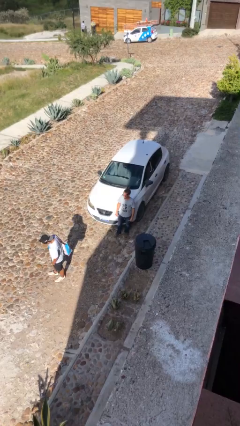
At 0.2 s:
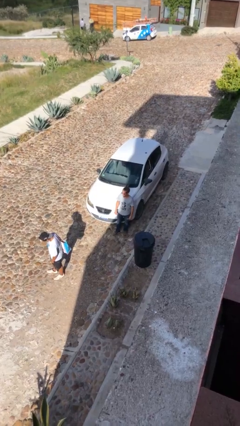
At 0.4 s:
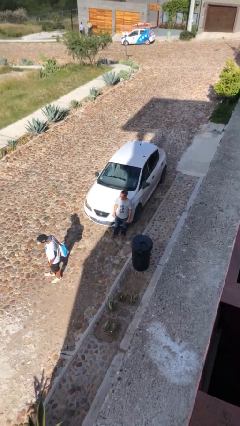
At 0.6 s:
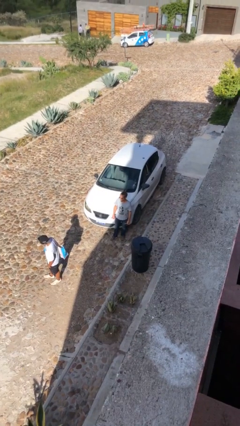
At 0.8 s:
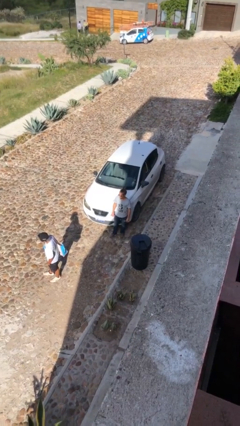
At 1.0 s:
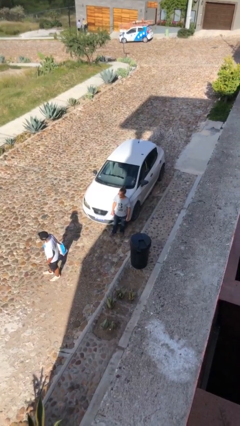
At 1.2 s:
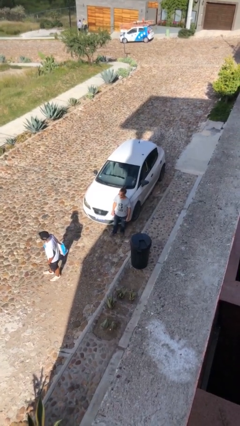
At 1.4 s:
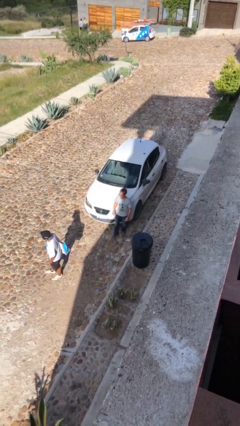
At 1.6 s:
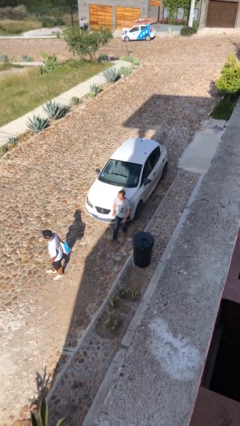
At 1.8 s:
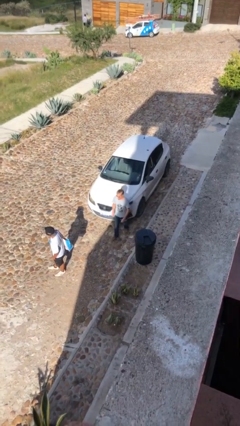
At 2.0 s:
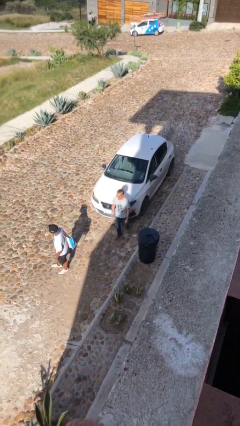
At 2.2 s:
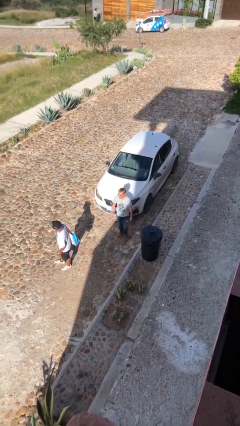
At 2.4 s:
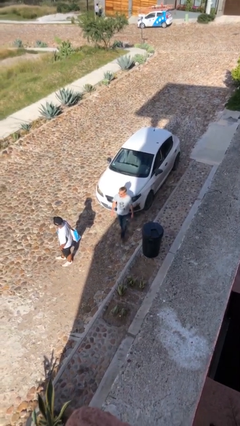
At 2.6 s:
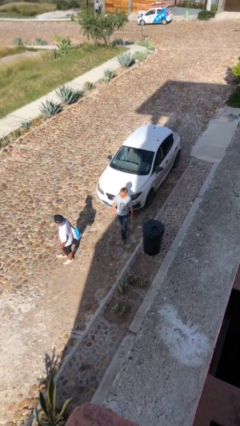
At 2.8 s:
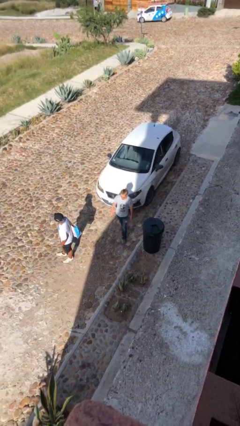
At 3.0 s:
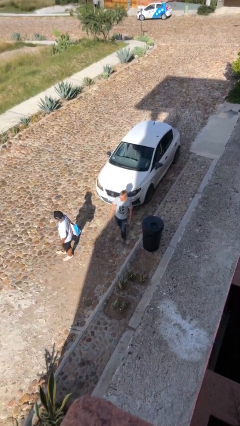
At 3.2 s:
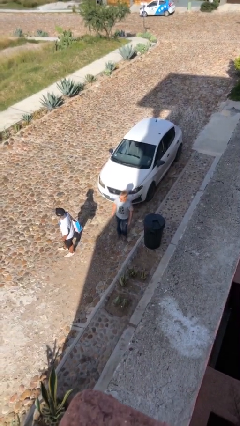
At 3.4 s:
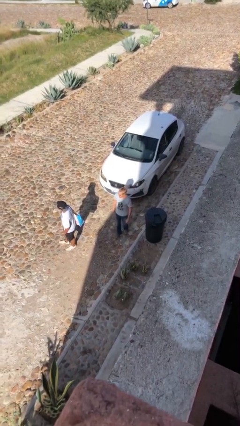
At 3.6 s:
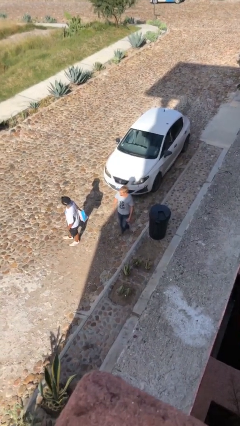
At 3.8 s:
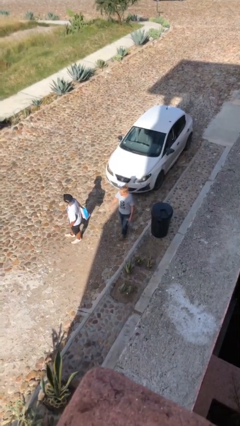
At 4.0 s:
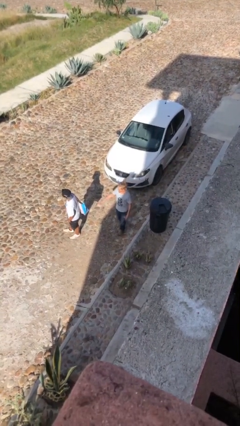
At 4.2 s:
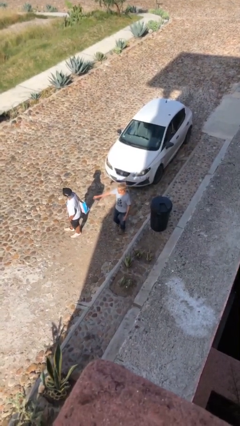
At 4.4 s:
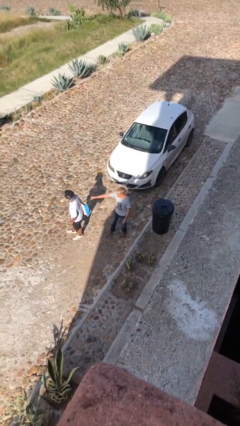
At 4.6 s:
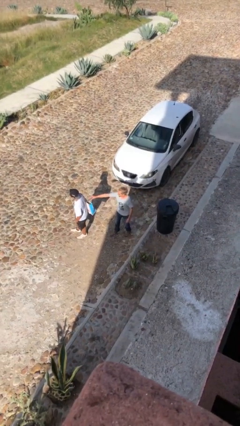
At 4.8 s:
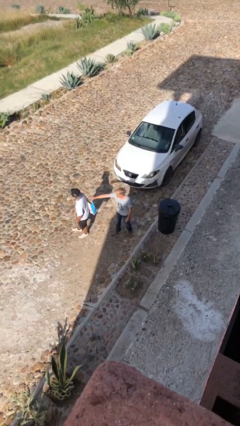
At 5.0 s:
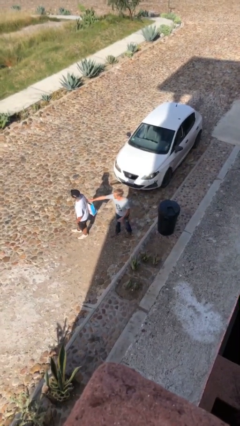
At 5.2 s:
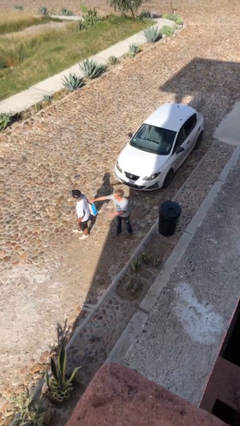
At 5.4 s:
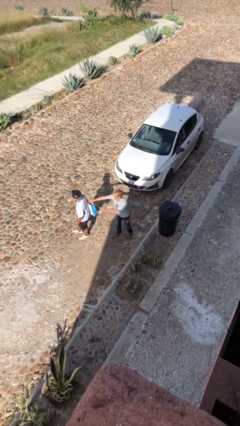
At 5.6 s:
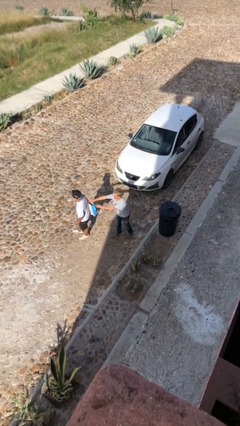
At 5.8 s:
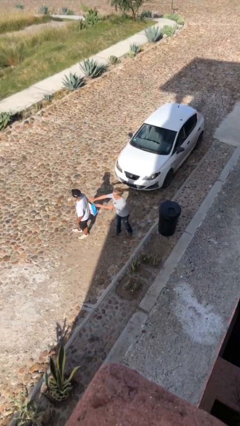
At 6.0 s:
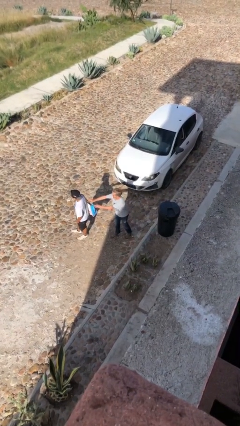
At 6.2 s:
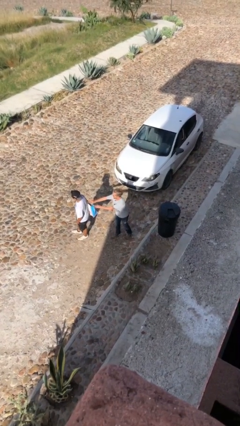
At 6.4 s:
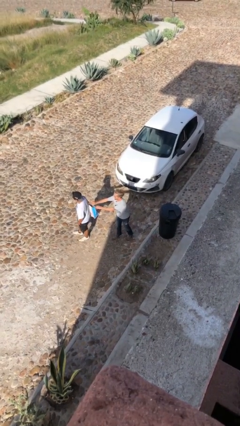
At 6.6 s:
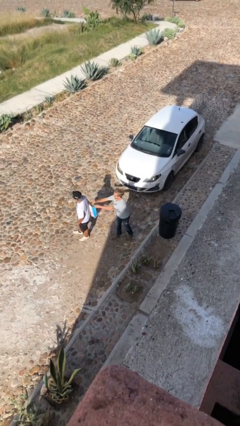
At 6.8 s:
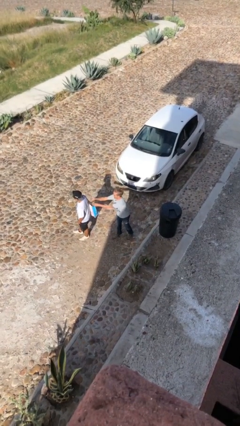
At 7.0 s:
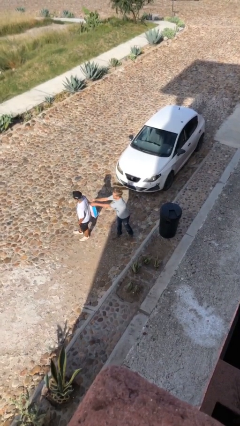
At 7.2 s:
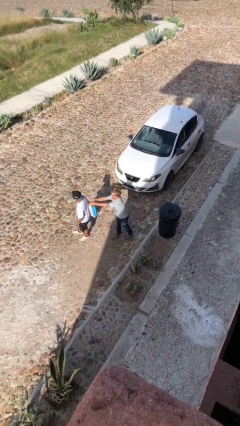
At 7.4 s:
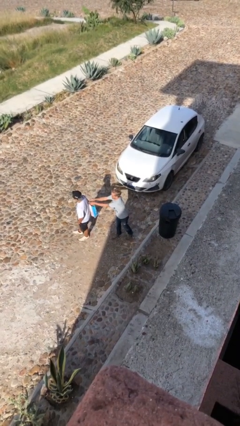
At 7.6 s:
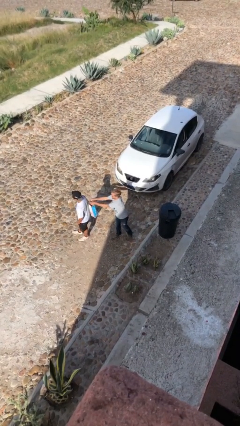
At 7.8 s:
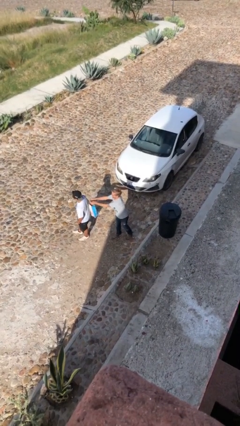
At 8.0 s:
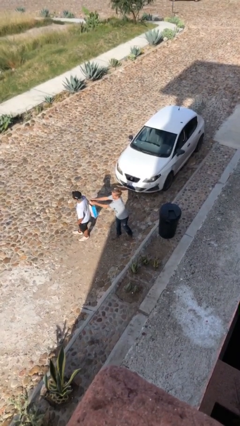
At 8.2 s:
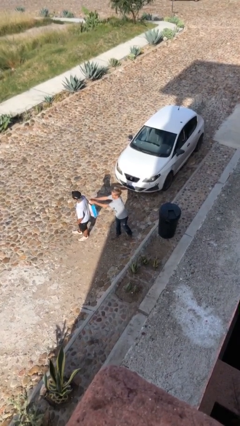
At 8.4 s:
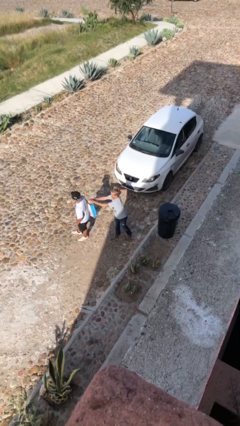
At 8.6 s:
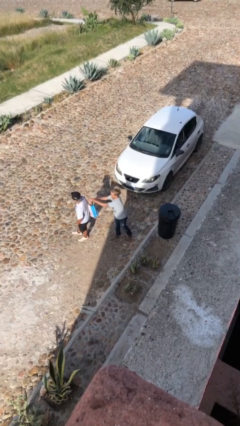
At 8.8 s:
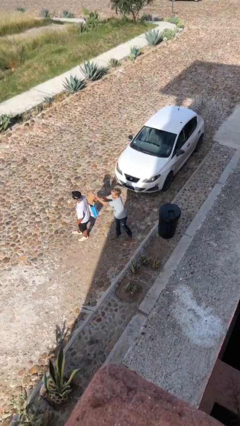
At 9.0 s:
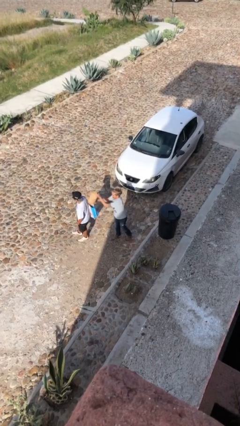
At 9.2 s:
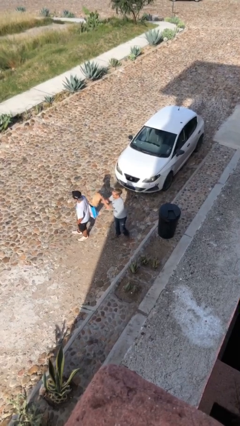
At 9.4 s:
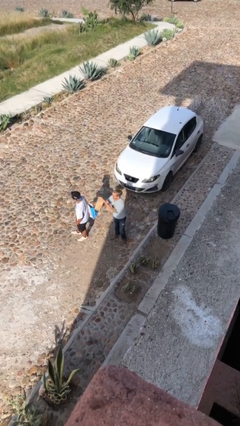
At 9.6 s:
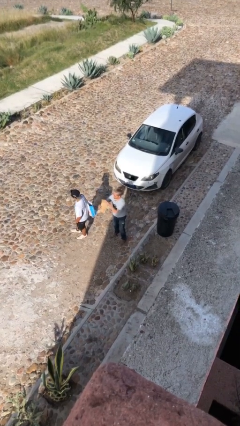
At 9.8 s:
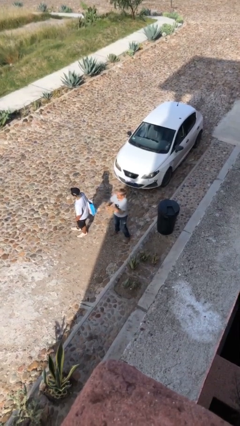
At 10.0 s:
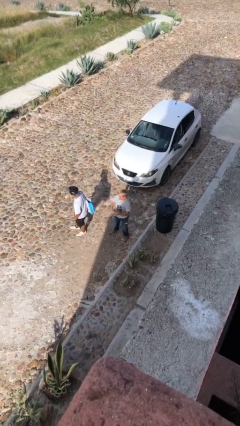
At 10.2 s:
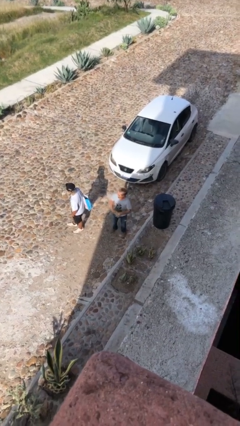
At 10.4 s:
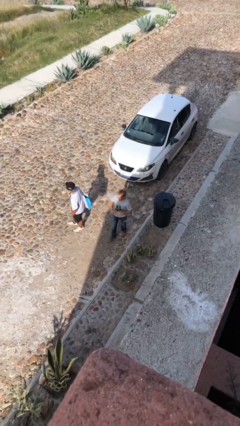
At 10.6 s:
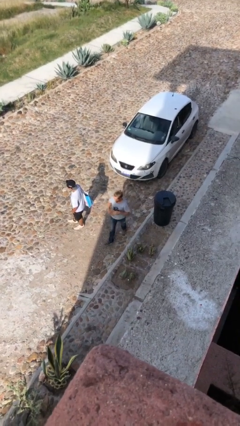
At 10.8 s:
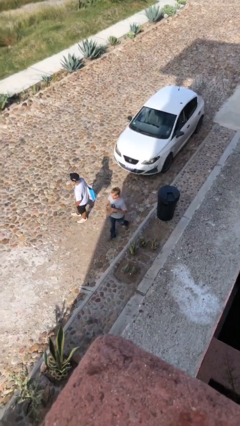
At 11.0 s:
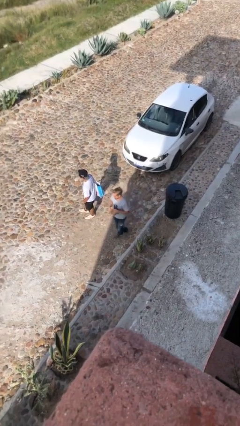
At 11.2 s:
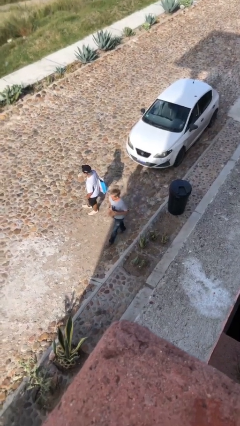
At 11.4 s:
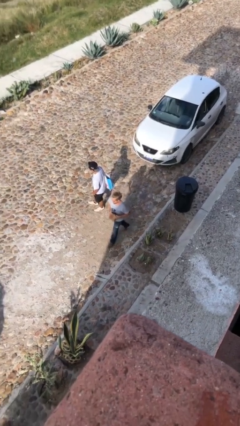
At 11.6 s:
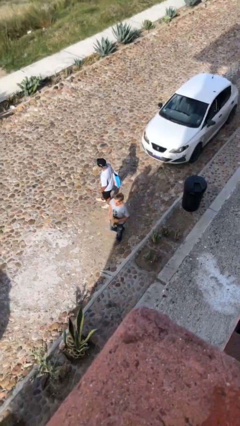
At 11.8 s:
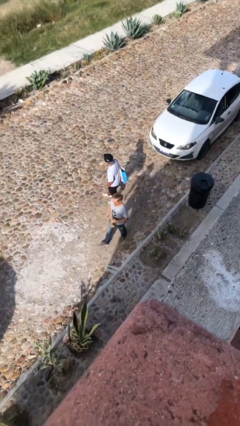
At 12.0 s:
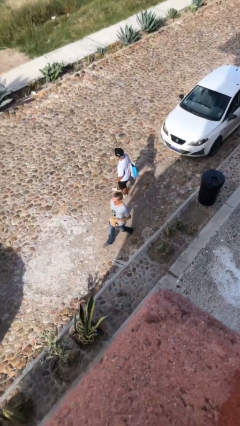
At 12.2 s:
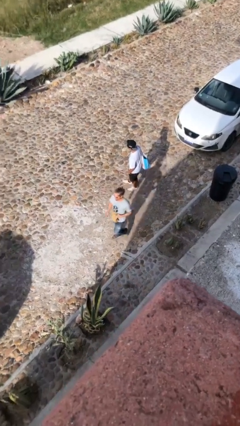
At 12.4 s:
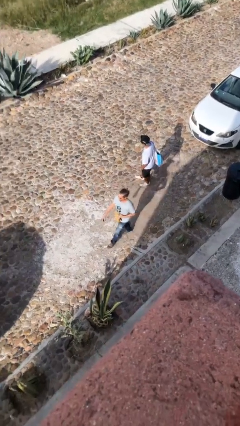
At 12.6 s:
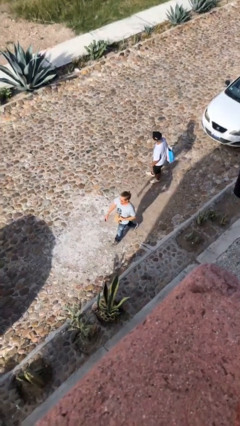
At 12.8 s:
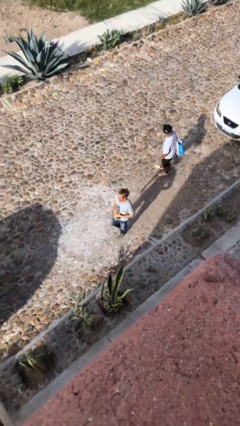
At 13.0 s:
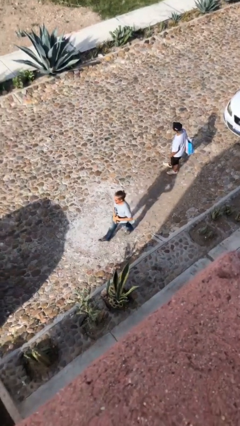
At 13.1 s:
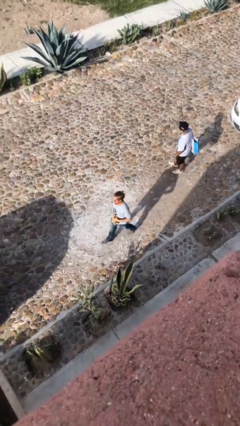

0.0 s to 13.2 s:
person steals object from person

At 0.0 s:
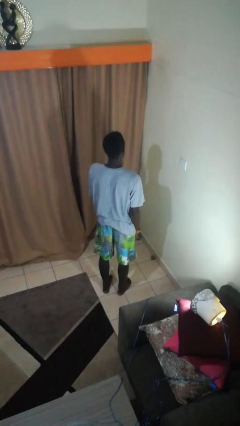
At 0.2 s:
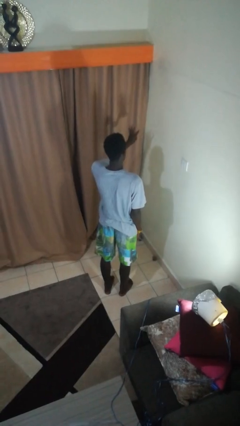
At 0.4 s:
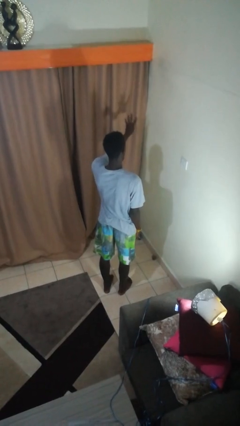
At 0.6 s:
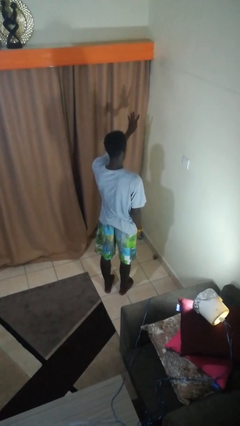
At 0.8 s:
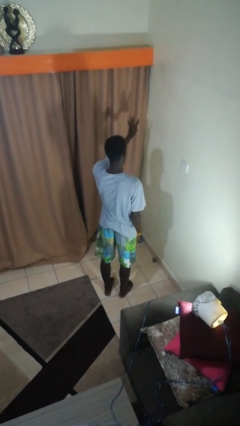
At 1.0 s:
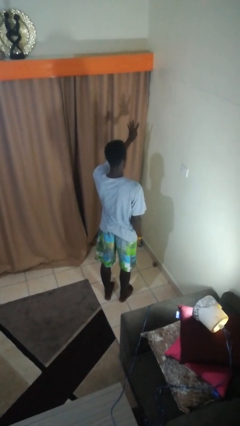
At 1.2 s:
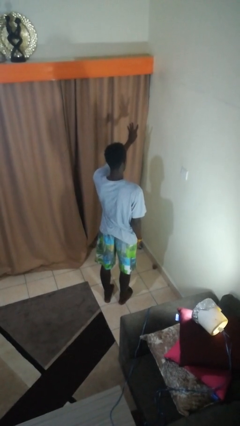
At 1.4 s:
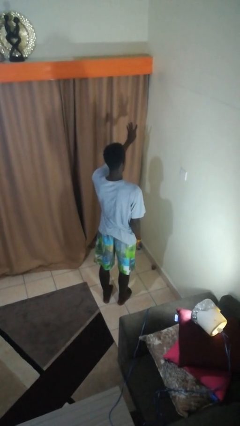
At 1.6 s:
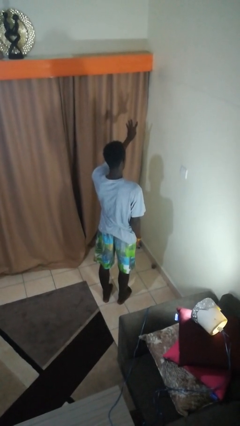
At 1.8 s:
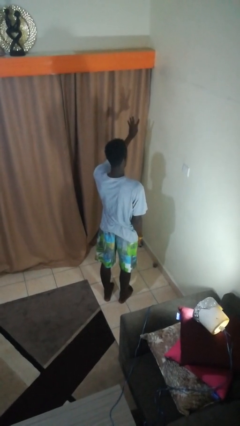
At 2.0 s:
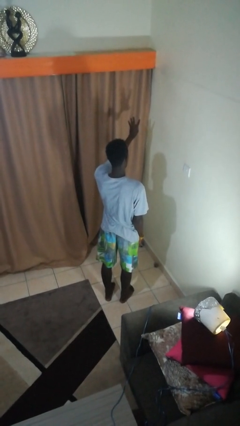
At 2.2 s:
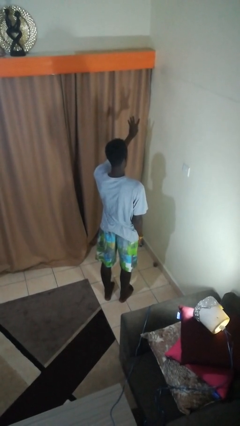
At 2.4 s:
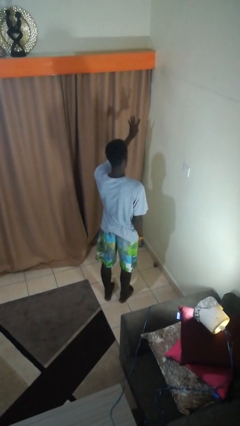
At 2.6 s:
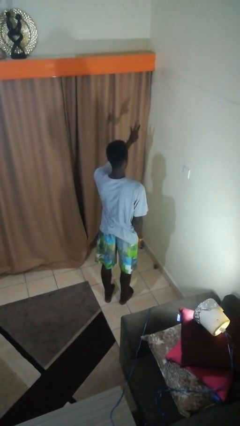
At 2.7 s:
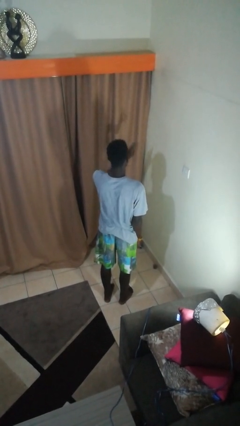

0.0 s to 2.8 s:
person gestures number four

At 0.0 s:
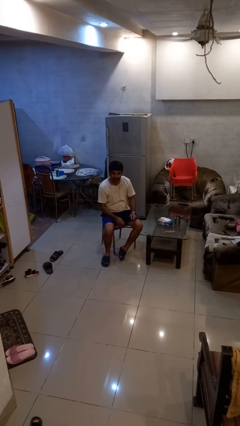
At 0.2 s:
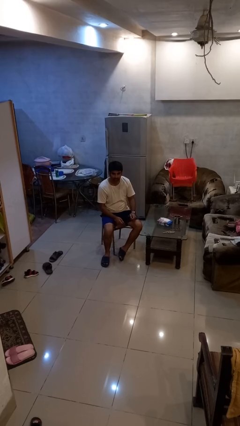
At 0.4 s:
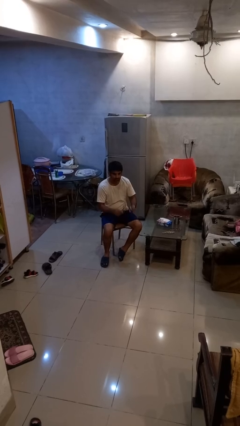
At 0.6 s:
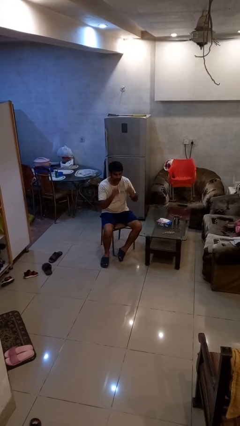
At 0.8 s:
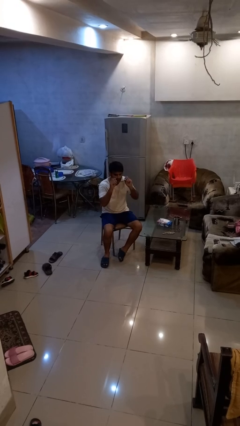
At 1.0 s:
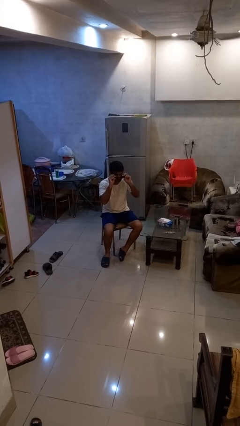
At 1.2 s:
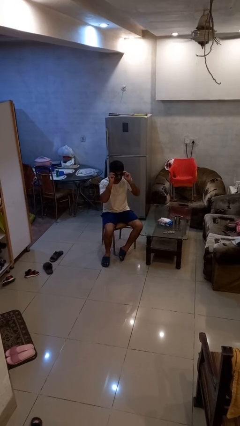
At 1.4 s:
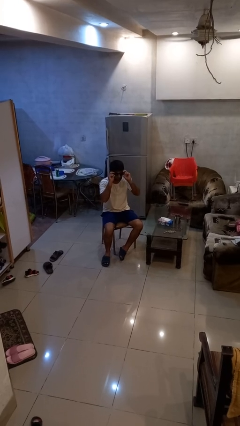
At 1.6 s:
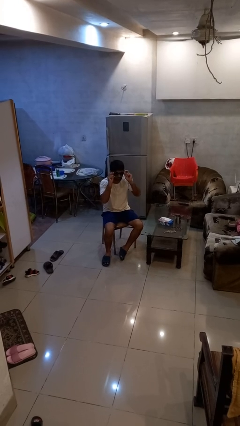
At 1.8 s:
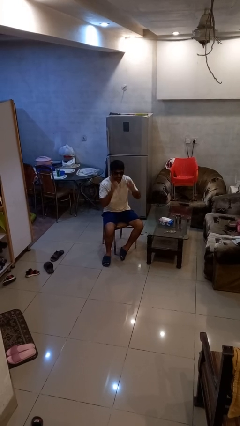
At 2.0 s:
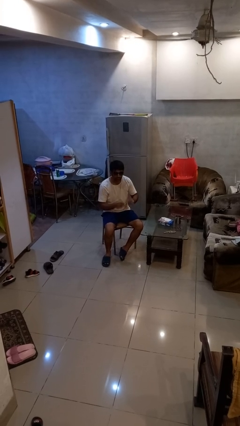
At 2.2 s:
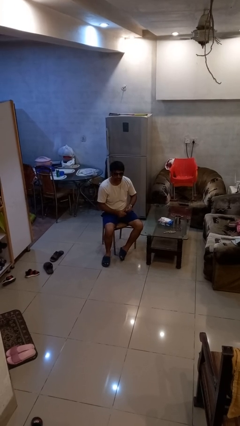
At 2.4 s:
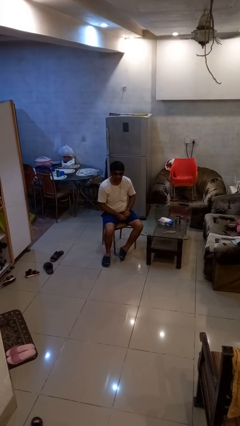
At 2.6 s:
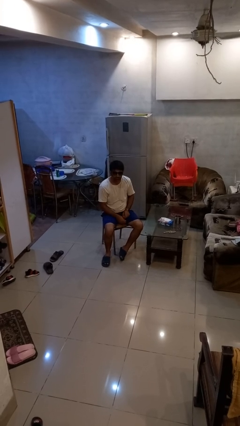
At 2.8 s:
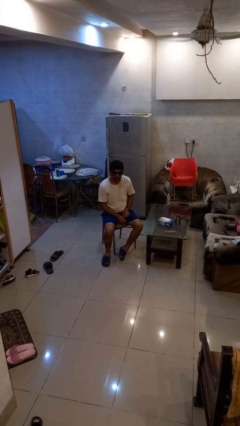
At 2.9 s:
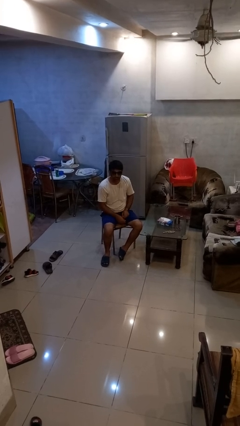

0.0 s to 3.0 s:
person puts on sunglasses
